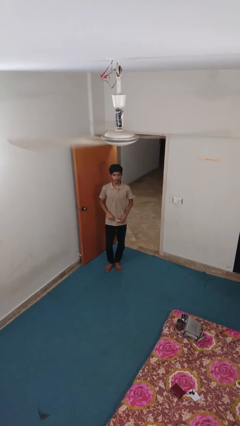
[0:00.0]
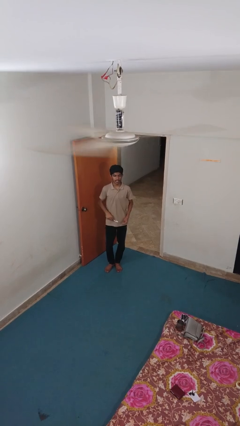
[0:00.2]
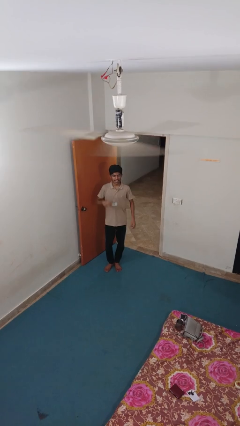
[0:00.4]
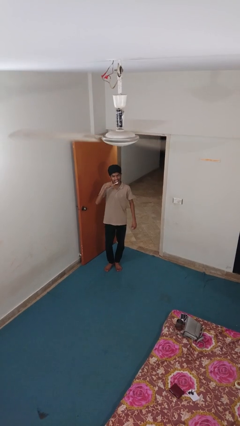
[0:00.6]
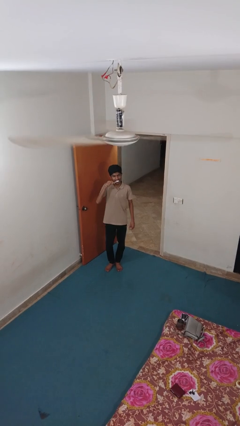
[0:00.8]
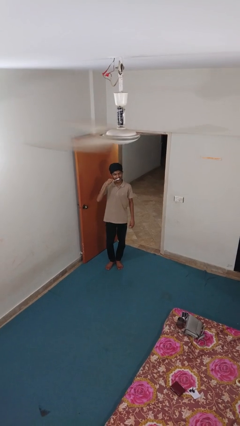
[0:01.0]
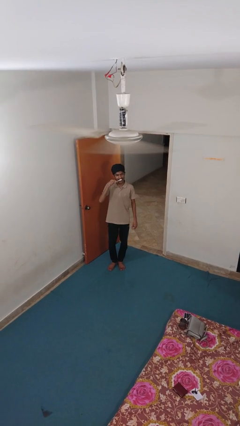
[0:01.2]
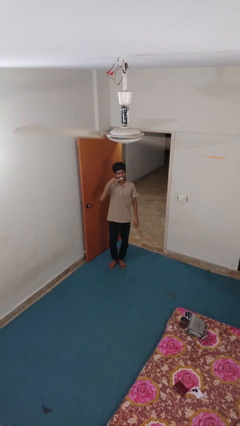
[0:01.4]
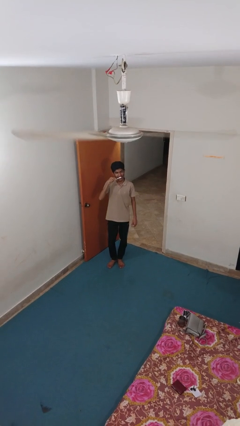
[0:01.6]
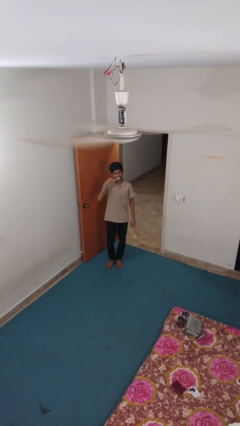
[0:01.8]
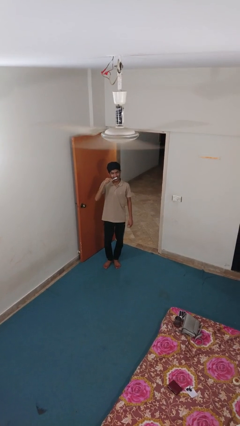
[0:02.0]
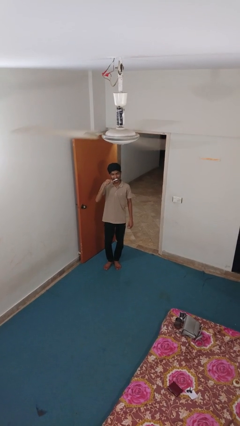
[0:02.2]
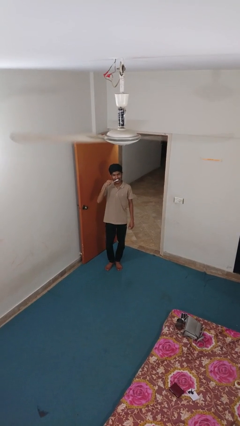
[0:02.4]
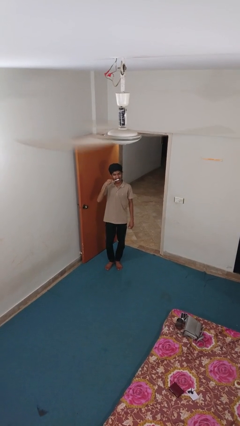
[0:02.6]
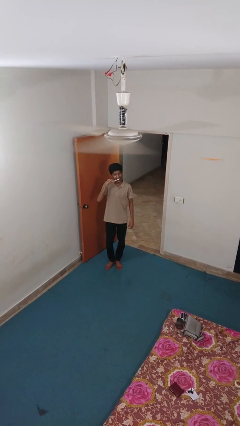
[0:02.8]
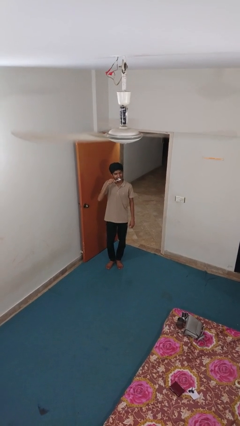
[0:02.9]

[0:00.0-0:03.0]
person brushes teeth

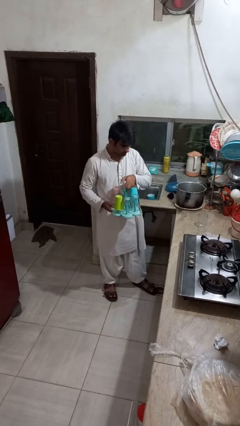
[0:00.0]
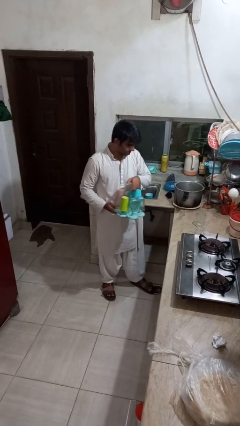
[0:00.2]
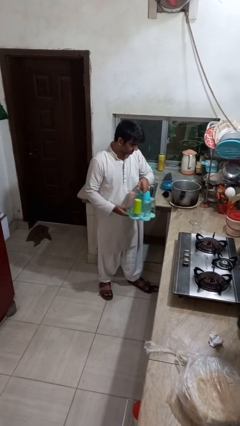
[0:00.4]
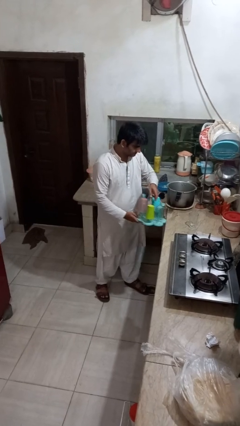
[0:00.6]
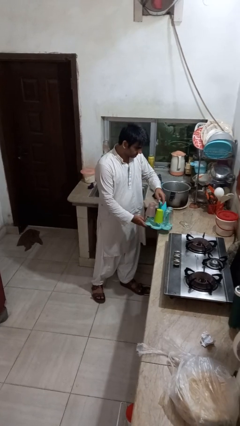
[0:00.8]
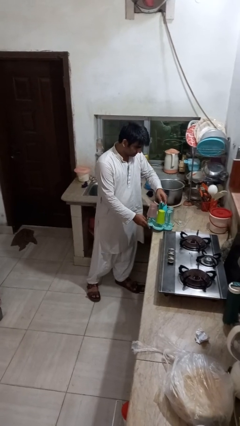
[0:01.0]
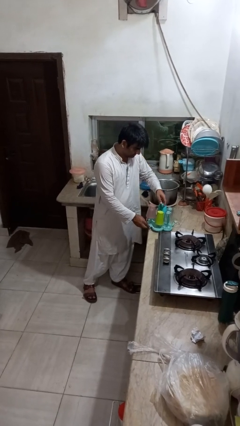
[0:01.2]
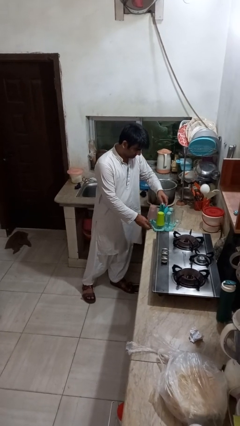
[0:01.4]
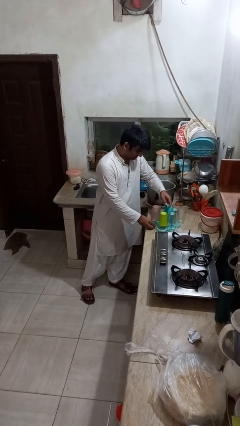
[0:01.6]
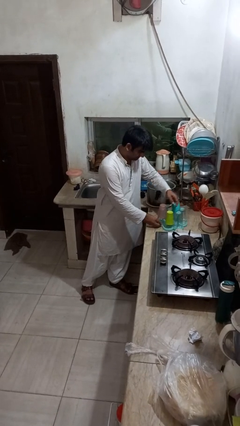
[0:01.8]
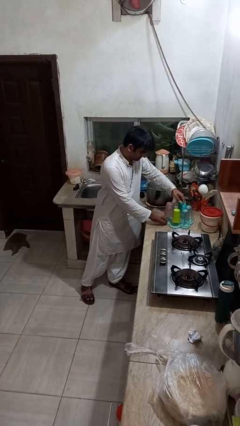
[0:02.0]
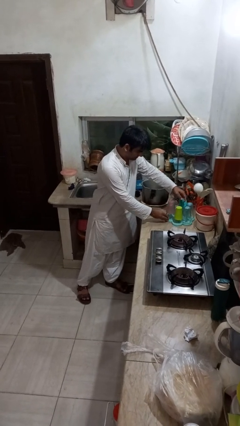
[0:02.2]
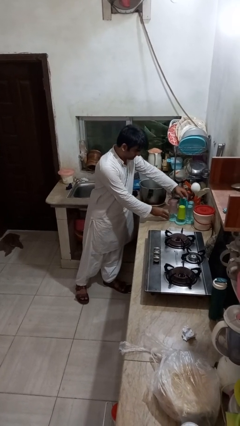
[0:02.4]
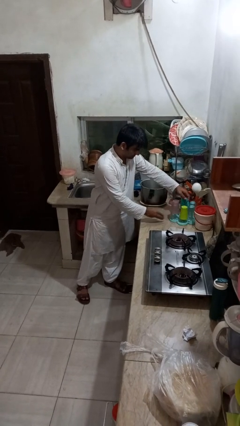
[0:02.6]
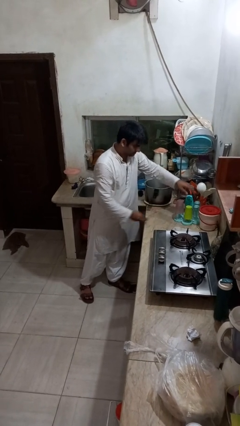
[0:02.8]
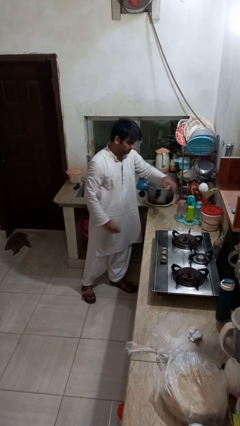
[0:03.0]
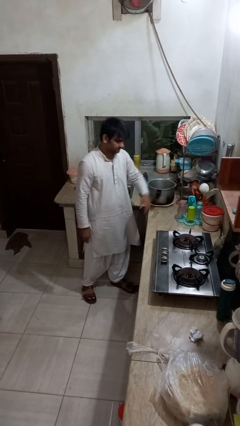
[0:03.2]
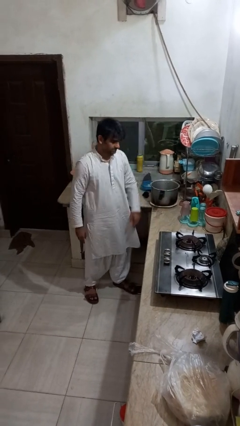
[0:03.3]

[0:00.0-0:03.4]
person puts down object on countertop

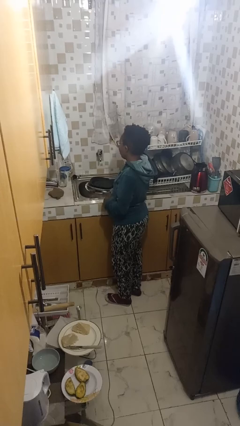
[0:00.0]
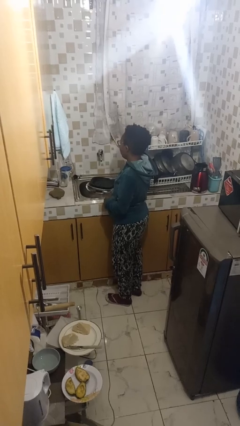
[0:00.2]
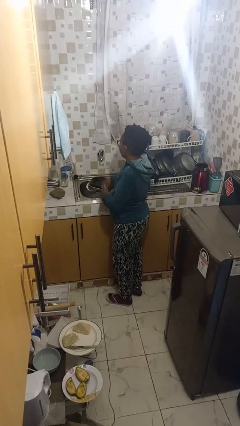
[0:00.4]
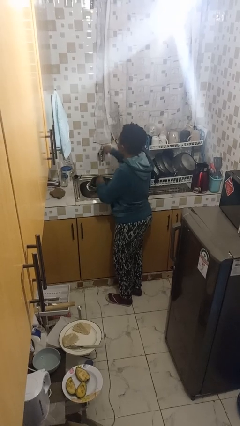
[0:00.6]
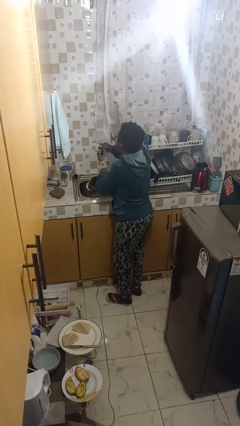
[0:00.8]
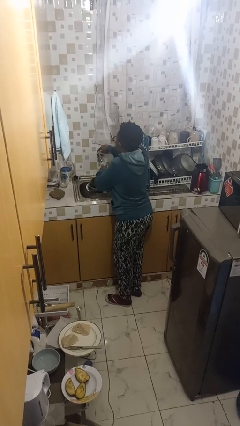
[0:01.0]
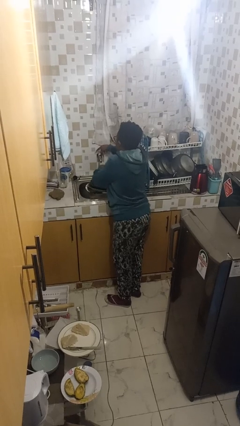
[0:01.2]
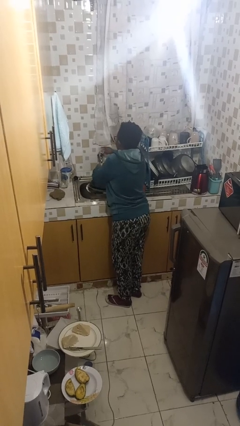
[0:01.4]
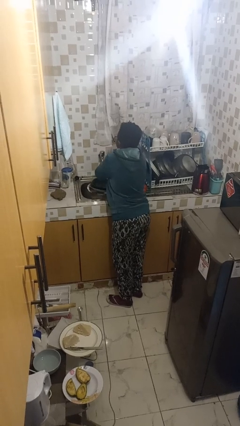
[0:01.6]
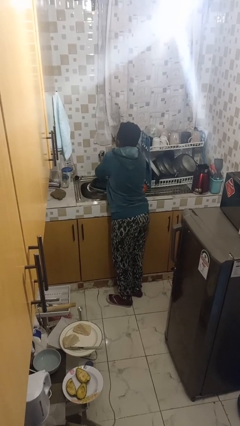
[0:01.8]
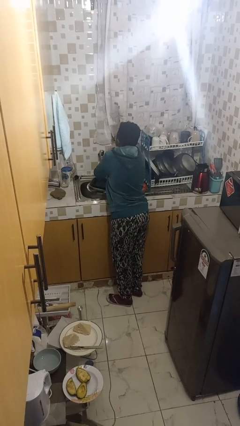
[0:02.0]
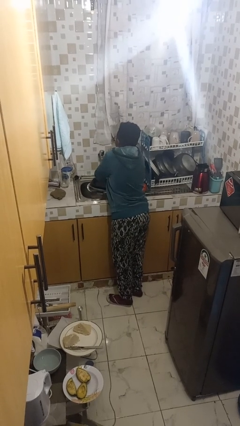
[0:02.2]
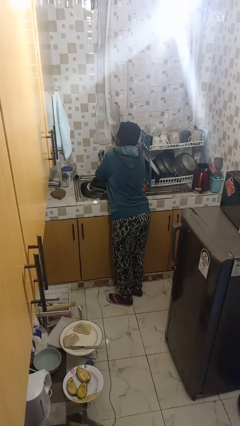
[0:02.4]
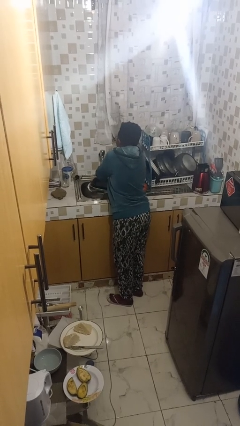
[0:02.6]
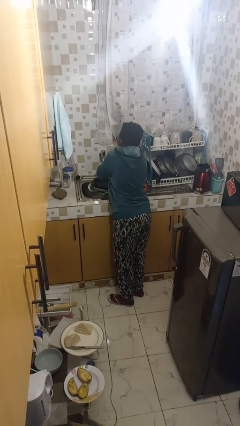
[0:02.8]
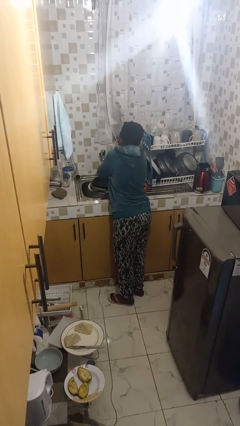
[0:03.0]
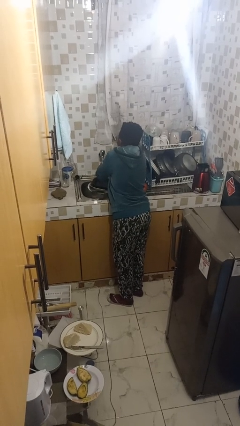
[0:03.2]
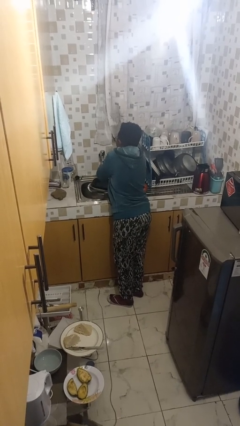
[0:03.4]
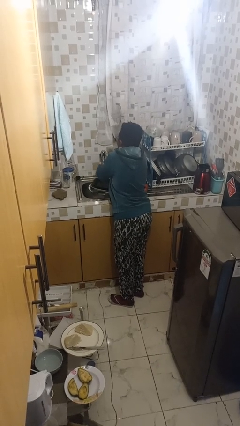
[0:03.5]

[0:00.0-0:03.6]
person washes hands

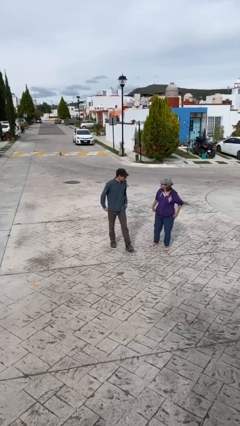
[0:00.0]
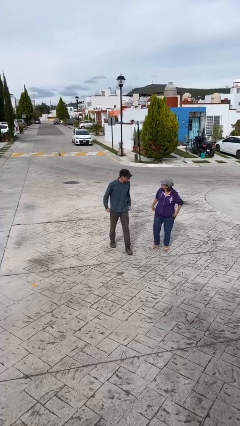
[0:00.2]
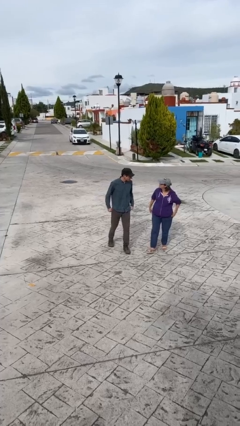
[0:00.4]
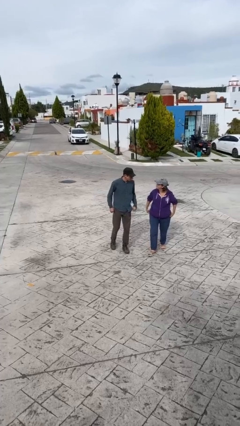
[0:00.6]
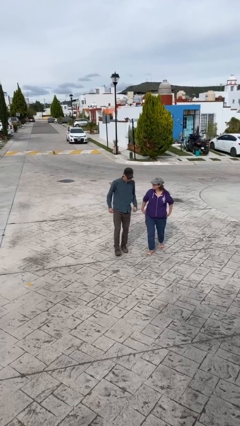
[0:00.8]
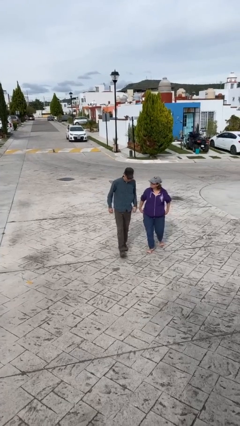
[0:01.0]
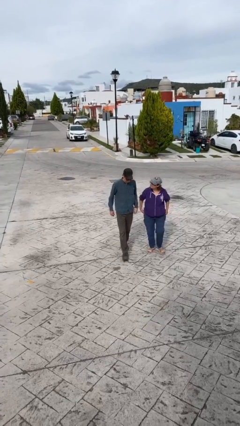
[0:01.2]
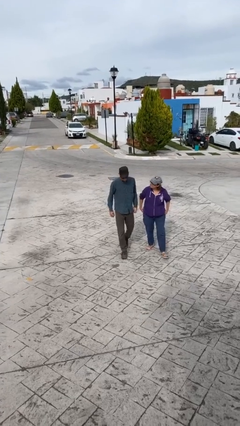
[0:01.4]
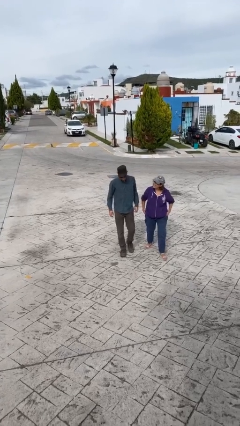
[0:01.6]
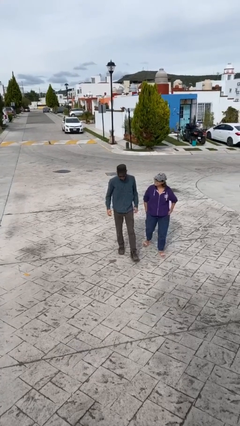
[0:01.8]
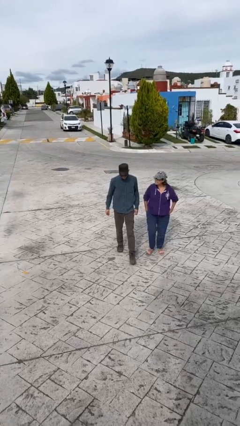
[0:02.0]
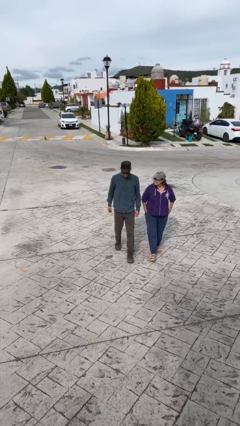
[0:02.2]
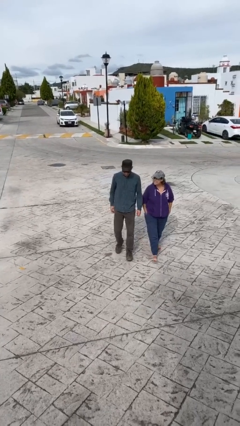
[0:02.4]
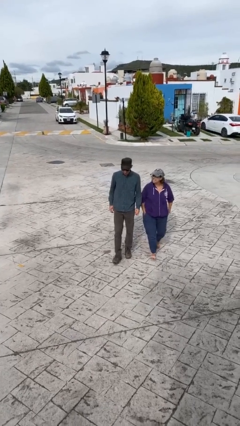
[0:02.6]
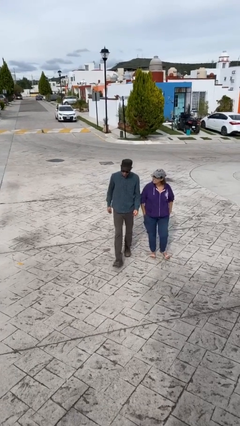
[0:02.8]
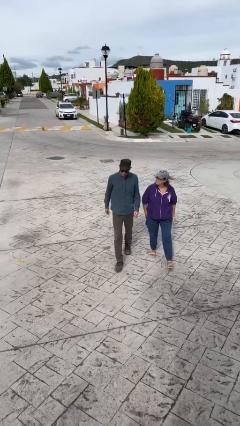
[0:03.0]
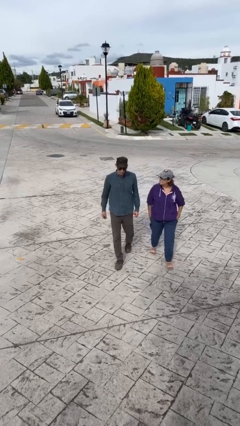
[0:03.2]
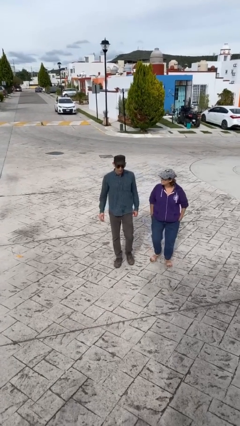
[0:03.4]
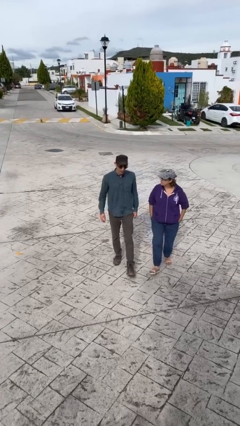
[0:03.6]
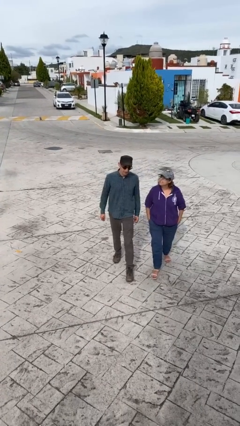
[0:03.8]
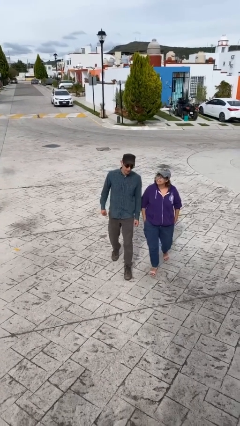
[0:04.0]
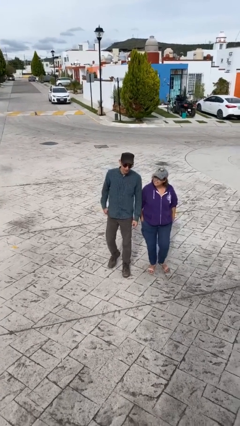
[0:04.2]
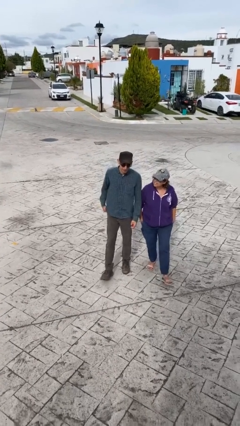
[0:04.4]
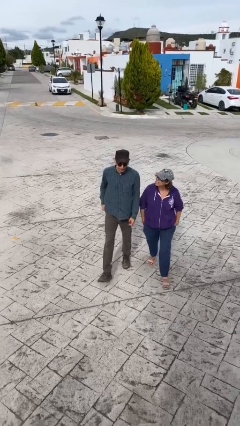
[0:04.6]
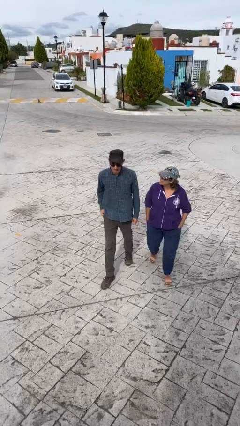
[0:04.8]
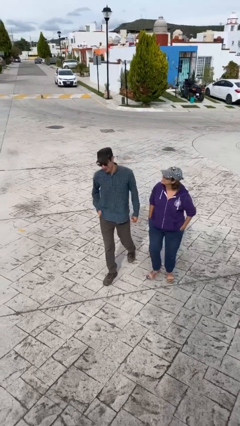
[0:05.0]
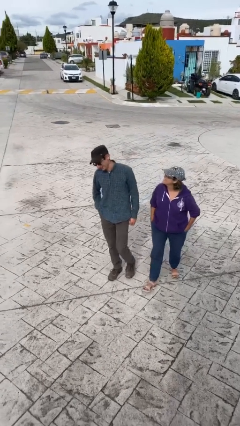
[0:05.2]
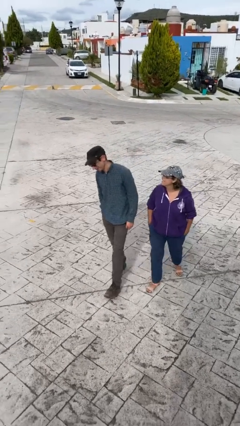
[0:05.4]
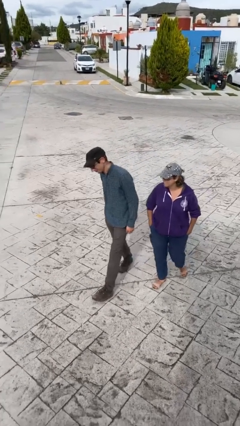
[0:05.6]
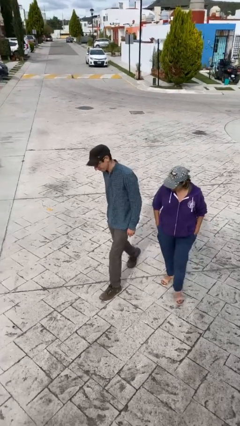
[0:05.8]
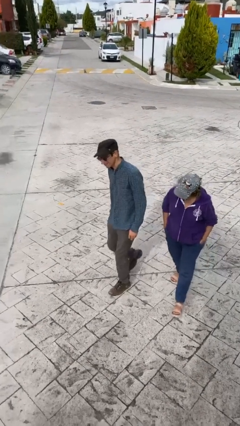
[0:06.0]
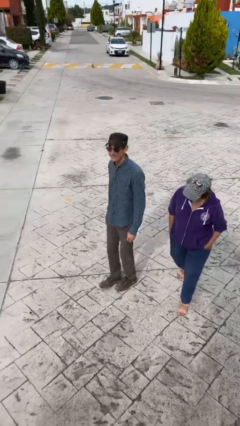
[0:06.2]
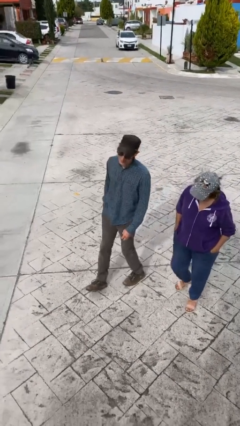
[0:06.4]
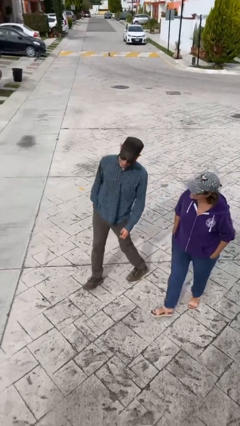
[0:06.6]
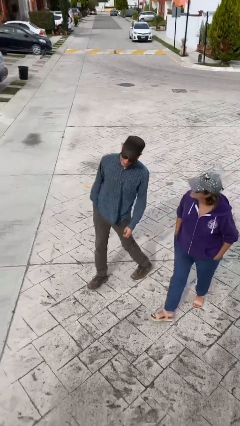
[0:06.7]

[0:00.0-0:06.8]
person talks to person

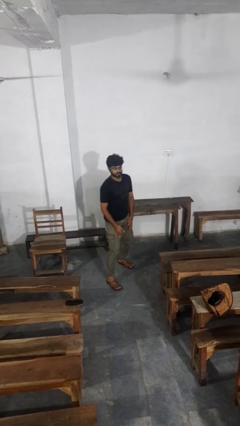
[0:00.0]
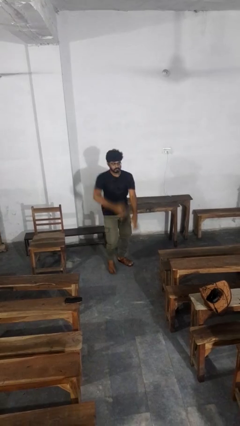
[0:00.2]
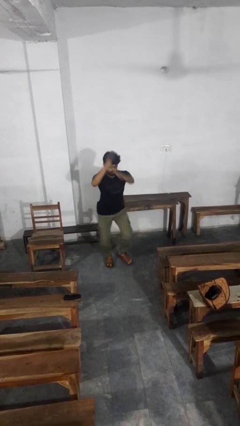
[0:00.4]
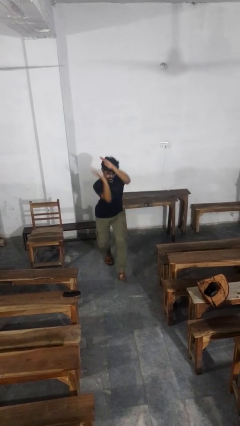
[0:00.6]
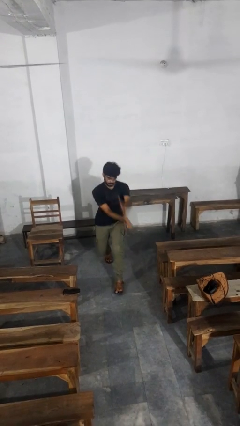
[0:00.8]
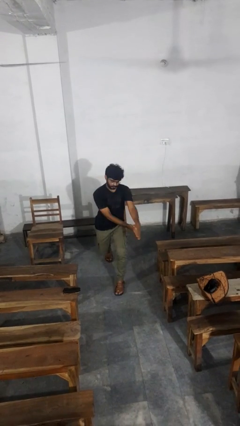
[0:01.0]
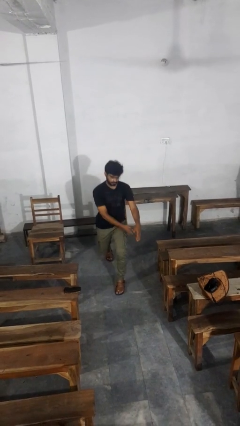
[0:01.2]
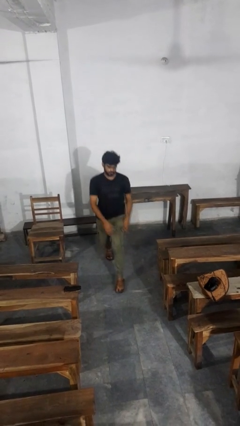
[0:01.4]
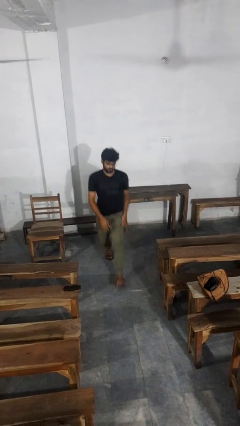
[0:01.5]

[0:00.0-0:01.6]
person karate chop
